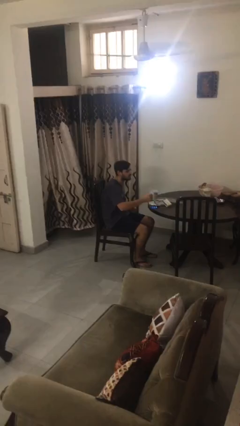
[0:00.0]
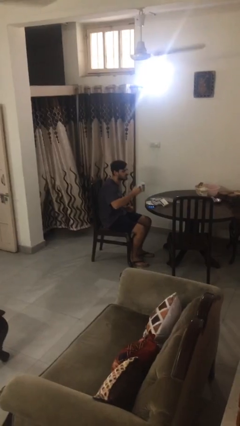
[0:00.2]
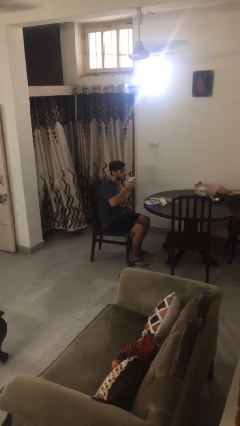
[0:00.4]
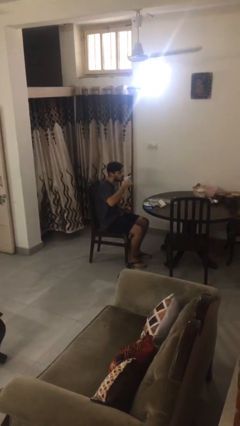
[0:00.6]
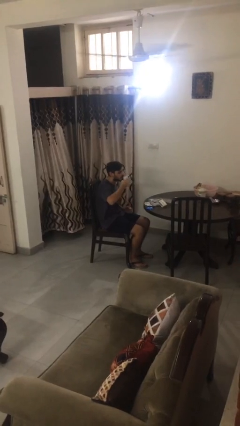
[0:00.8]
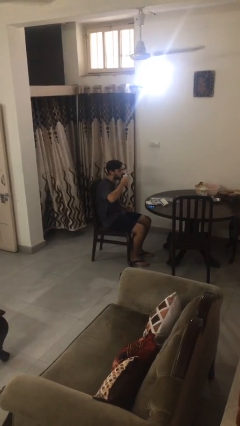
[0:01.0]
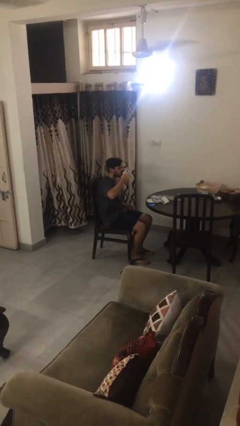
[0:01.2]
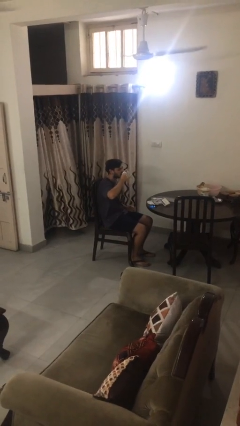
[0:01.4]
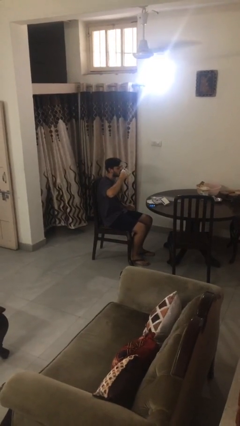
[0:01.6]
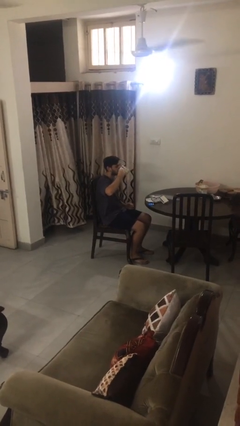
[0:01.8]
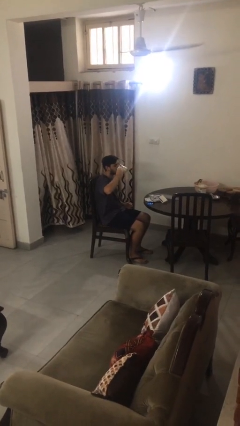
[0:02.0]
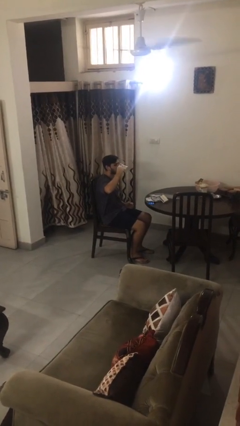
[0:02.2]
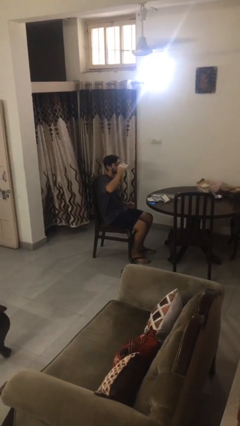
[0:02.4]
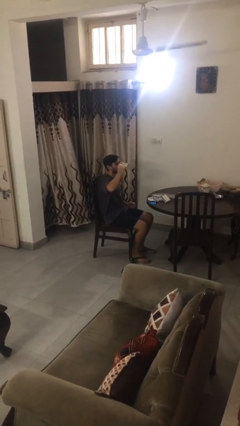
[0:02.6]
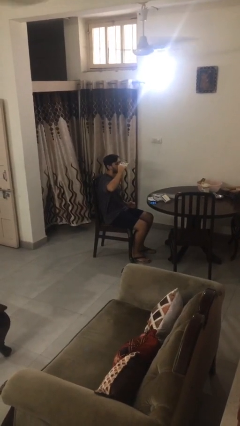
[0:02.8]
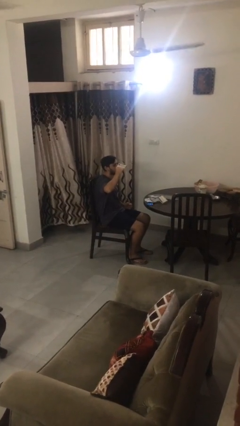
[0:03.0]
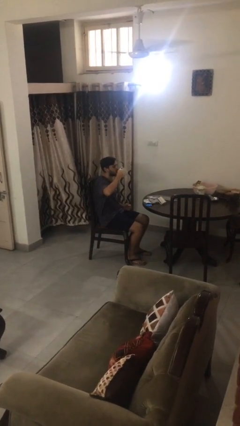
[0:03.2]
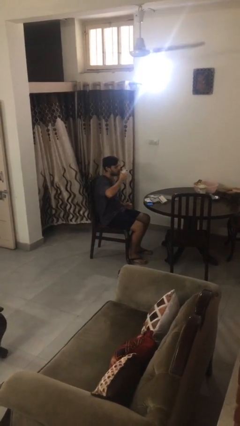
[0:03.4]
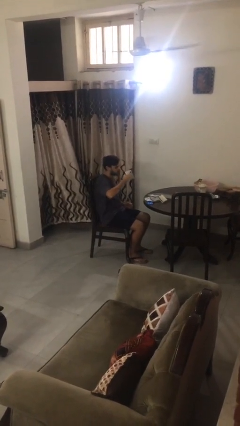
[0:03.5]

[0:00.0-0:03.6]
person drinks from cup

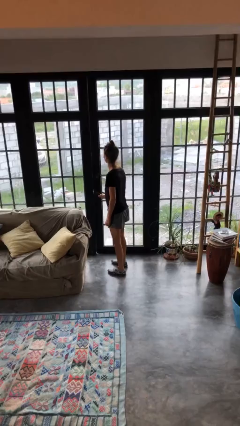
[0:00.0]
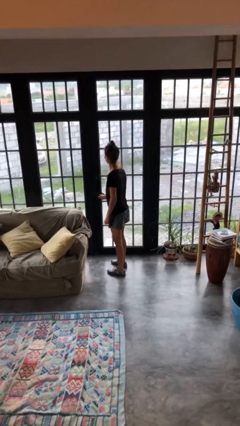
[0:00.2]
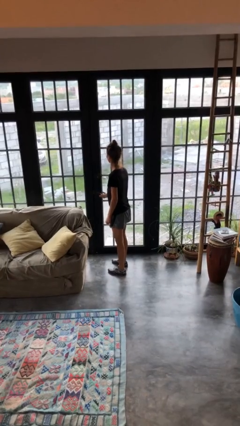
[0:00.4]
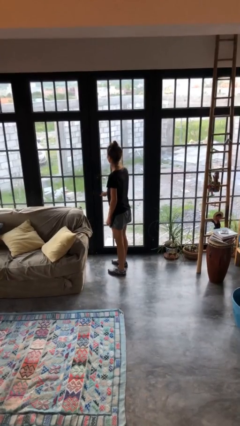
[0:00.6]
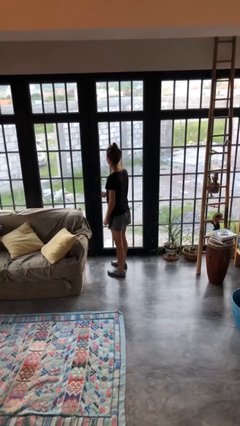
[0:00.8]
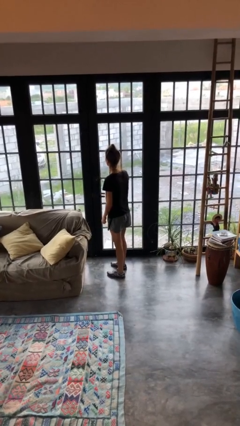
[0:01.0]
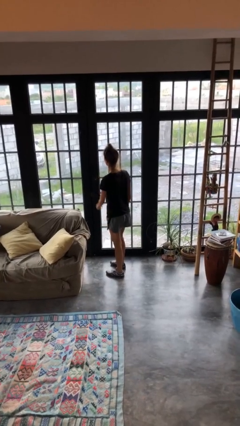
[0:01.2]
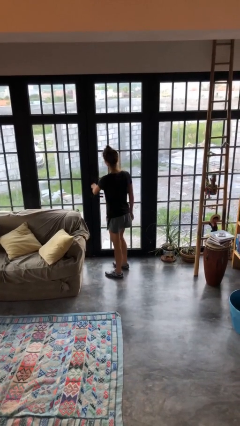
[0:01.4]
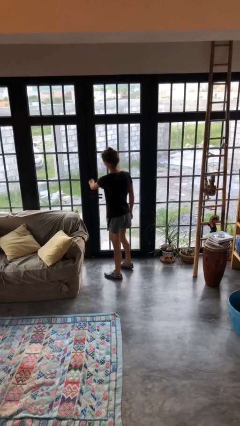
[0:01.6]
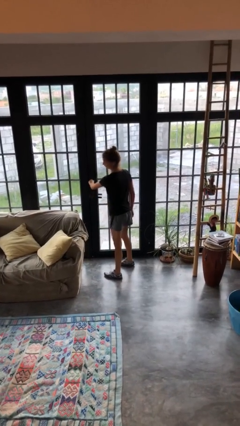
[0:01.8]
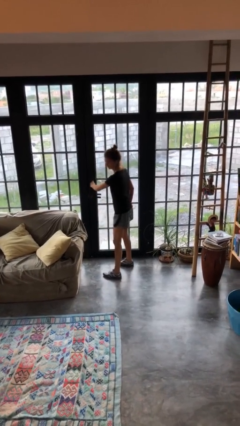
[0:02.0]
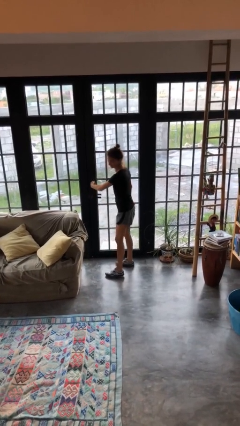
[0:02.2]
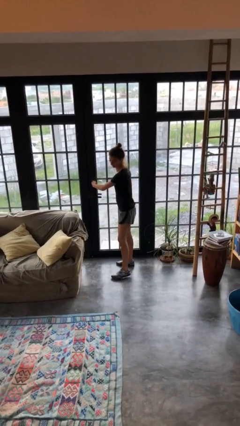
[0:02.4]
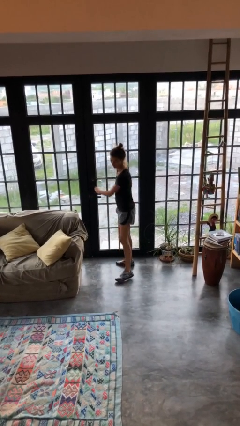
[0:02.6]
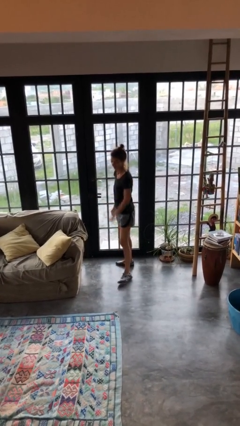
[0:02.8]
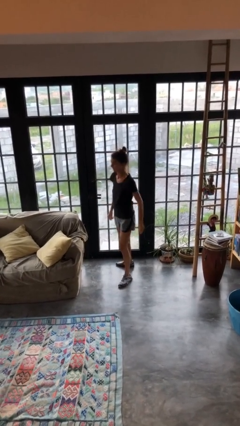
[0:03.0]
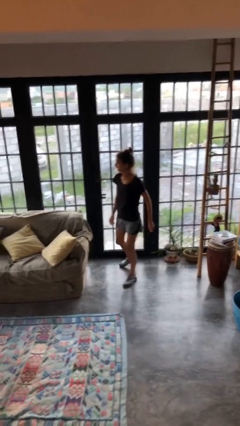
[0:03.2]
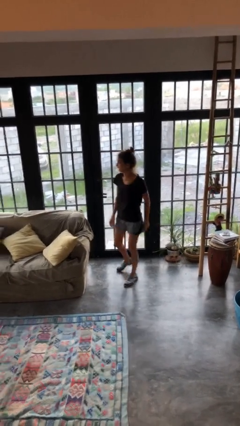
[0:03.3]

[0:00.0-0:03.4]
person locks door with keys

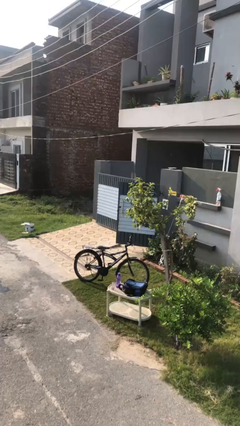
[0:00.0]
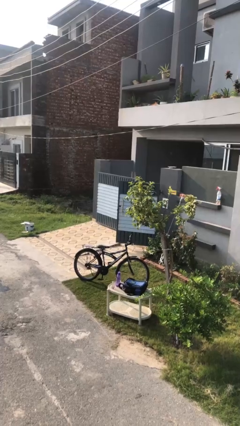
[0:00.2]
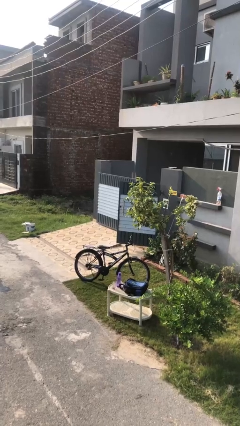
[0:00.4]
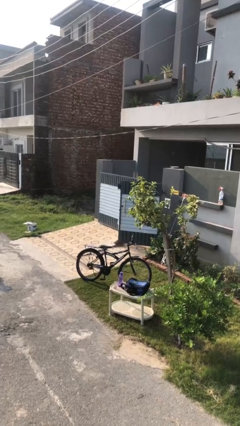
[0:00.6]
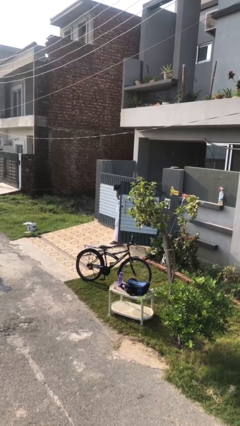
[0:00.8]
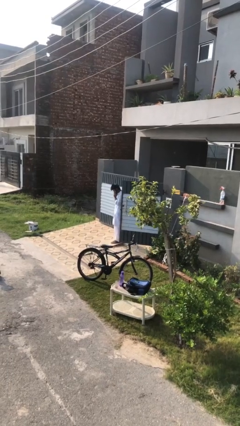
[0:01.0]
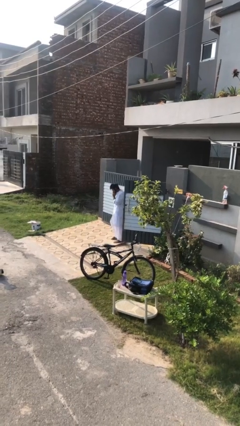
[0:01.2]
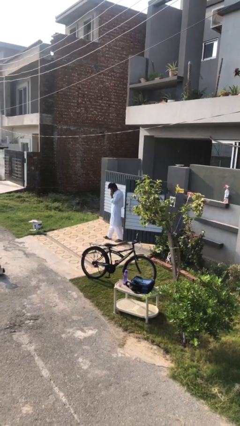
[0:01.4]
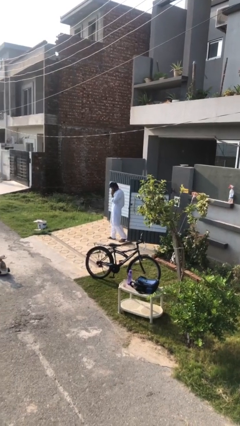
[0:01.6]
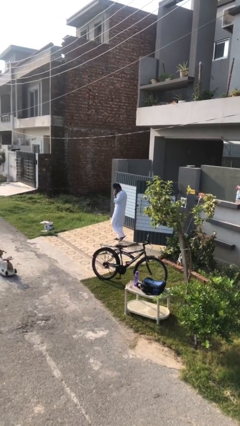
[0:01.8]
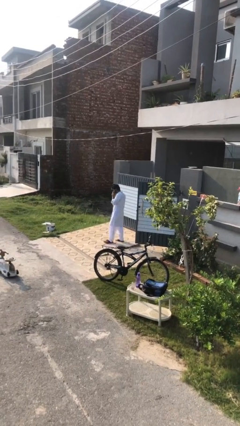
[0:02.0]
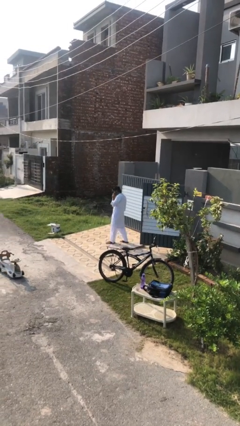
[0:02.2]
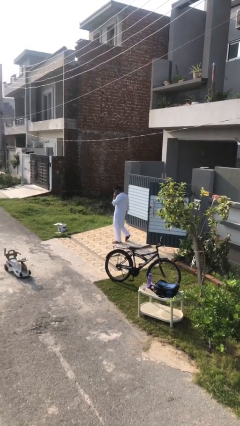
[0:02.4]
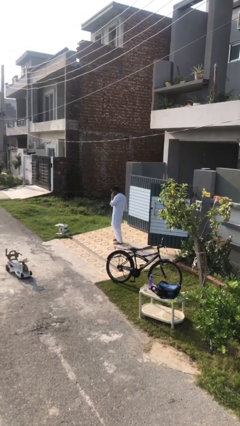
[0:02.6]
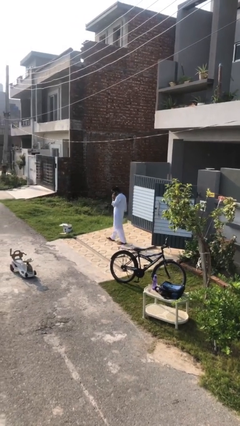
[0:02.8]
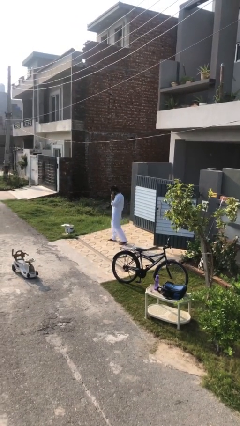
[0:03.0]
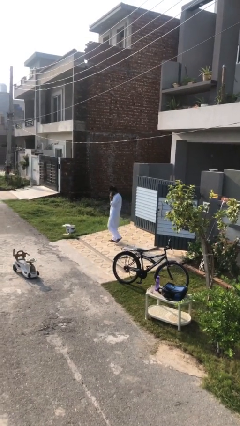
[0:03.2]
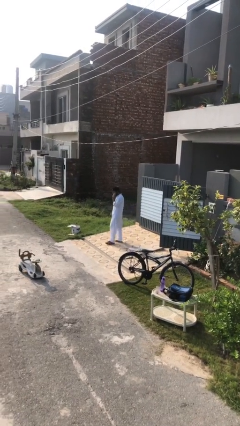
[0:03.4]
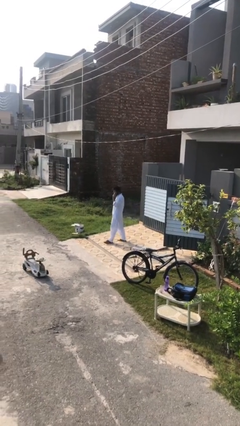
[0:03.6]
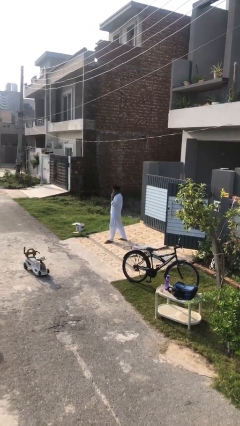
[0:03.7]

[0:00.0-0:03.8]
person enters scene through structure

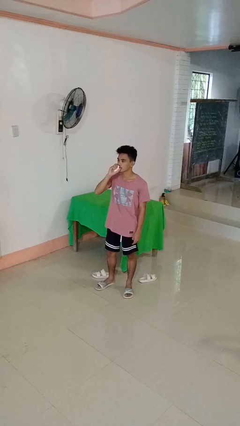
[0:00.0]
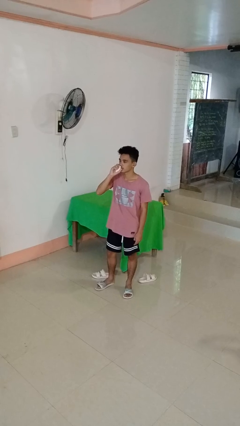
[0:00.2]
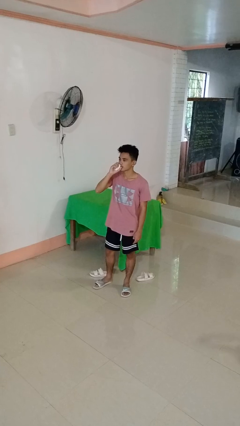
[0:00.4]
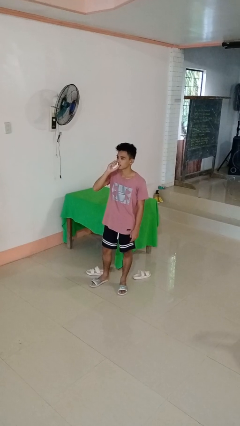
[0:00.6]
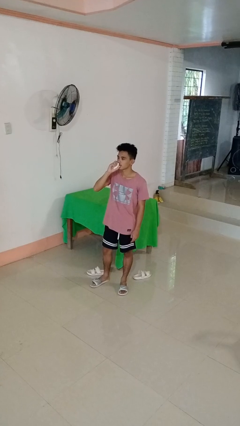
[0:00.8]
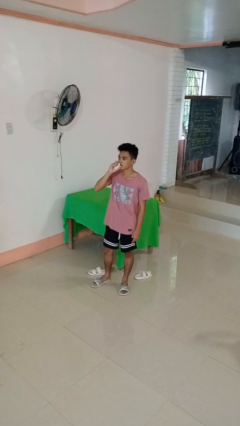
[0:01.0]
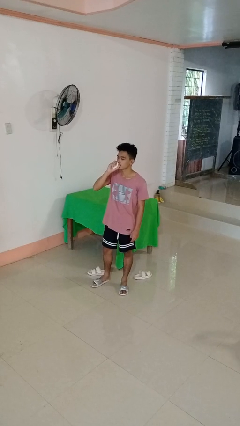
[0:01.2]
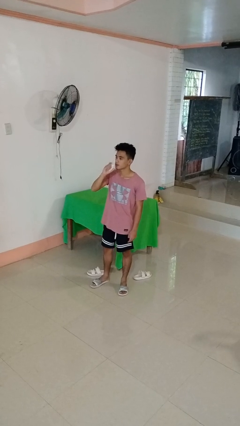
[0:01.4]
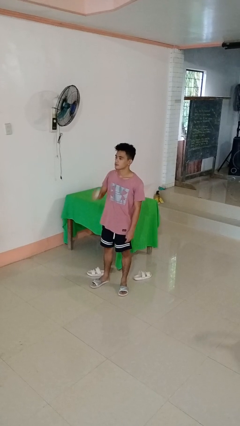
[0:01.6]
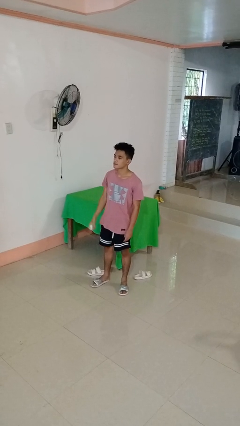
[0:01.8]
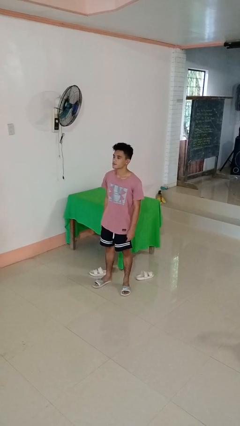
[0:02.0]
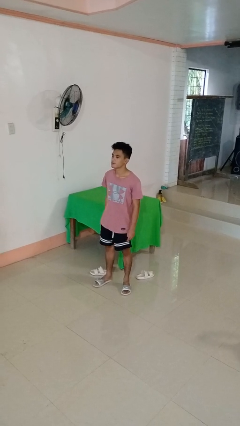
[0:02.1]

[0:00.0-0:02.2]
person vapes

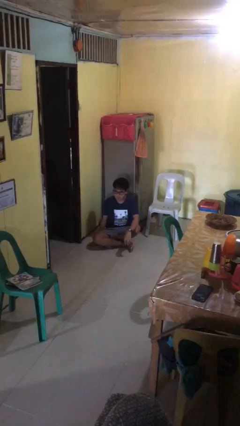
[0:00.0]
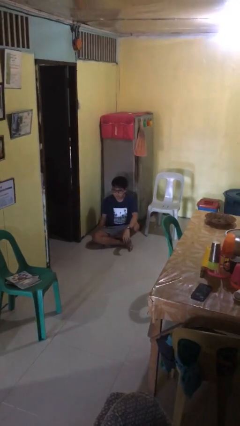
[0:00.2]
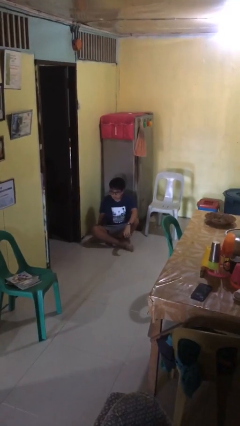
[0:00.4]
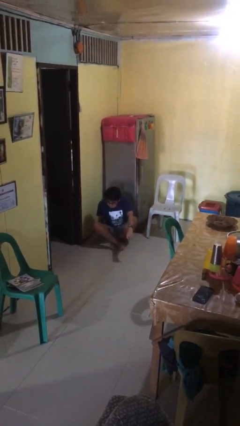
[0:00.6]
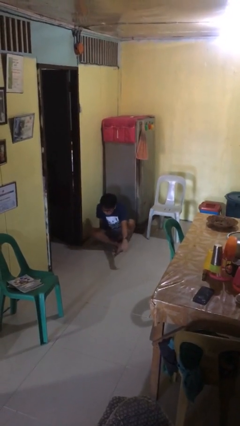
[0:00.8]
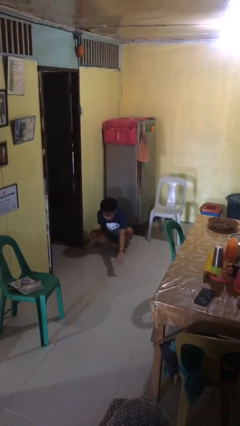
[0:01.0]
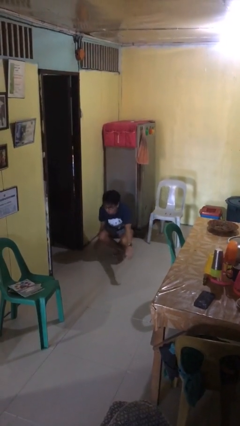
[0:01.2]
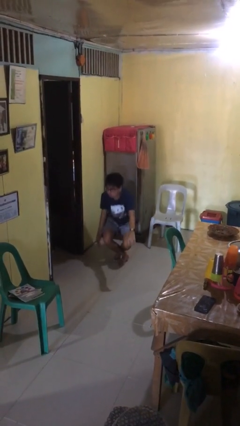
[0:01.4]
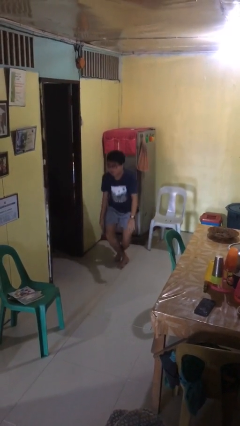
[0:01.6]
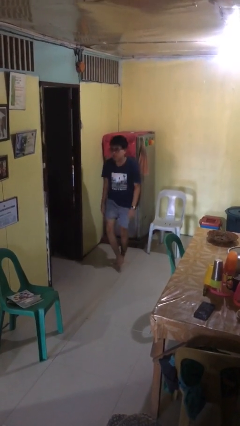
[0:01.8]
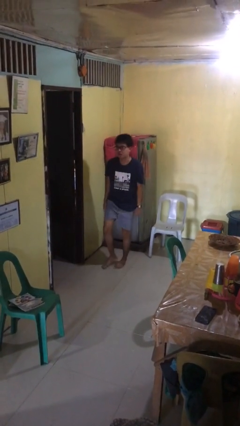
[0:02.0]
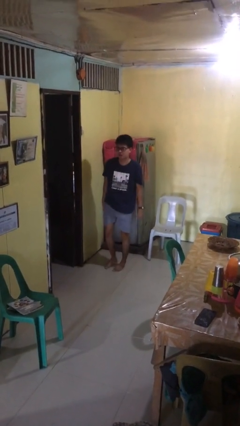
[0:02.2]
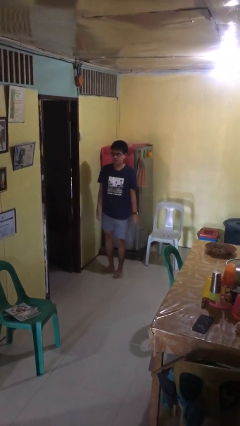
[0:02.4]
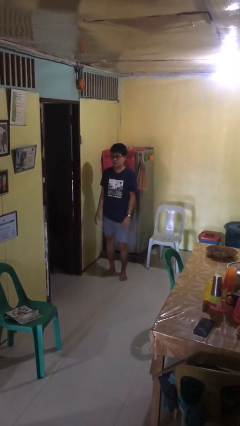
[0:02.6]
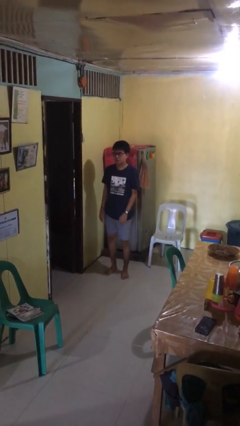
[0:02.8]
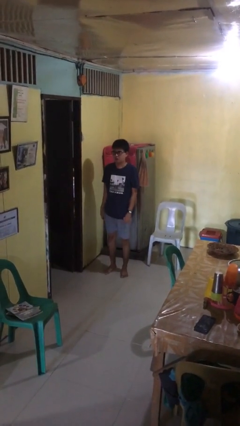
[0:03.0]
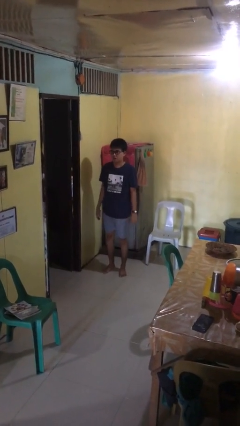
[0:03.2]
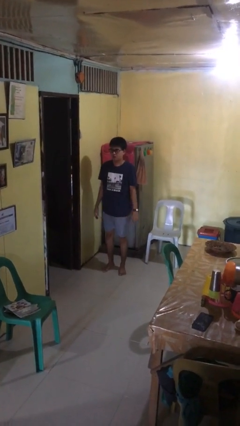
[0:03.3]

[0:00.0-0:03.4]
person stands up from floor

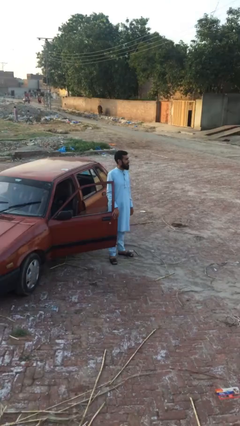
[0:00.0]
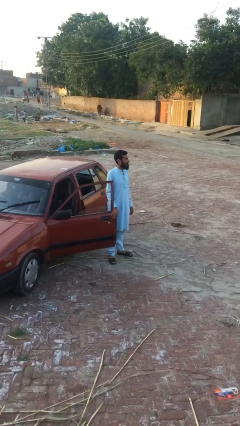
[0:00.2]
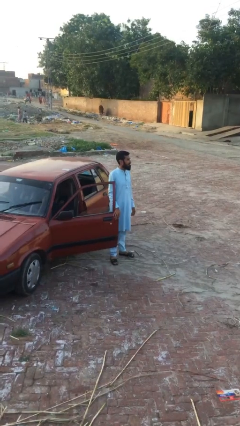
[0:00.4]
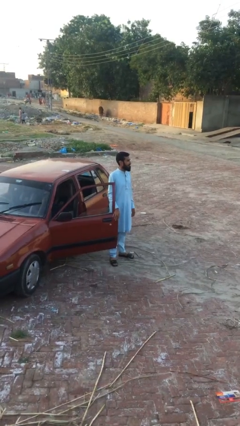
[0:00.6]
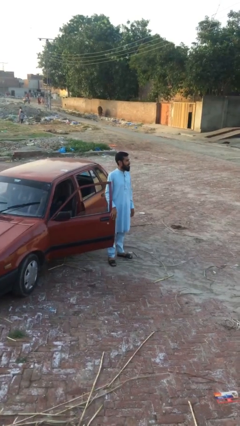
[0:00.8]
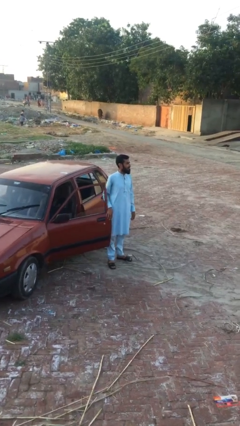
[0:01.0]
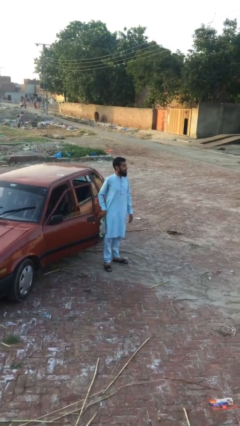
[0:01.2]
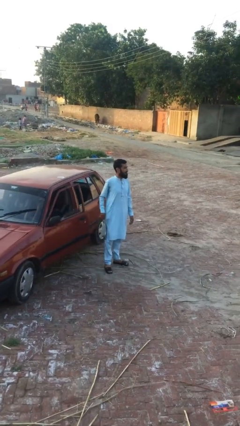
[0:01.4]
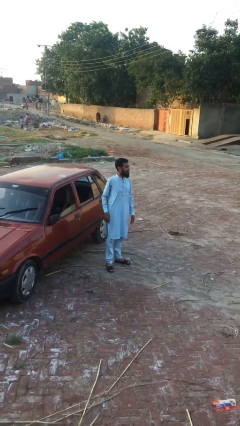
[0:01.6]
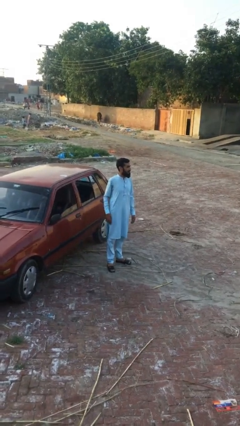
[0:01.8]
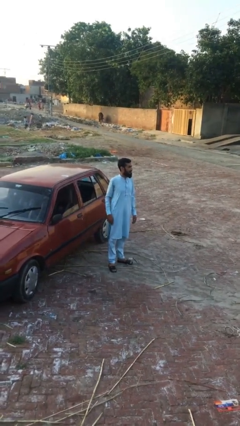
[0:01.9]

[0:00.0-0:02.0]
person closes car door
